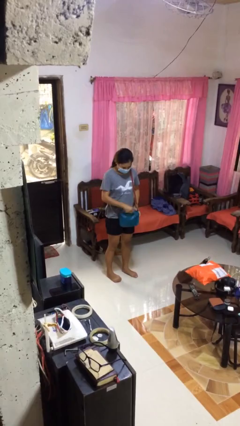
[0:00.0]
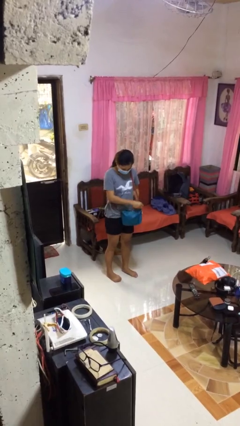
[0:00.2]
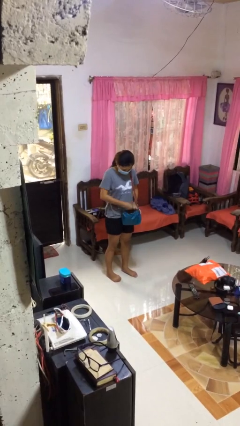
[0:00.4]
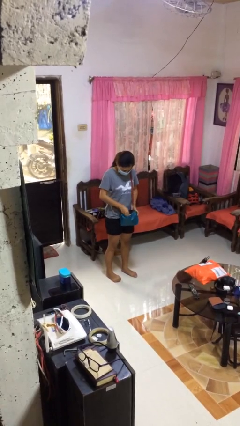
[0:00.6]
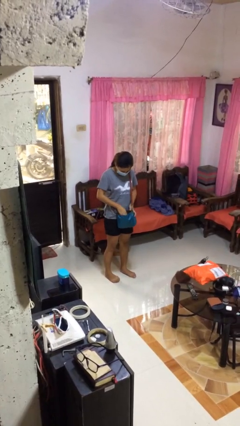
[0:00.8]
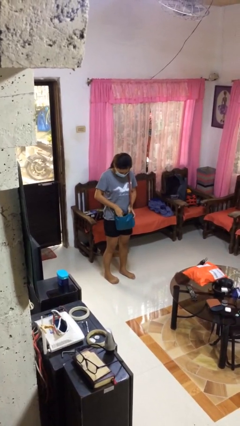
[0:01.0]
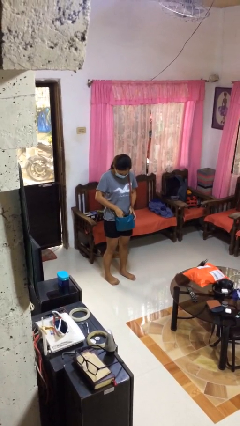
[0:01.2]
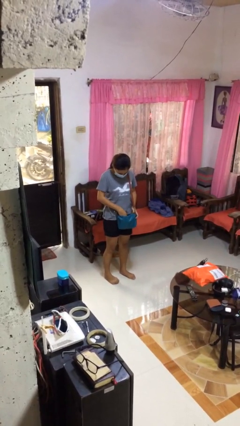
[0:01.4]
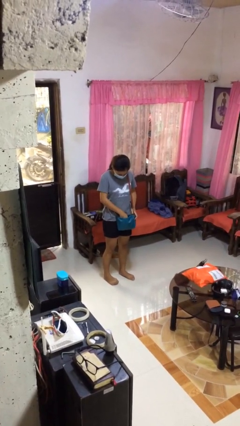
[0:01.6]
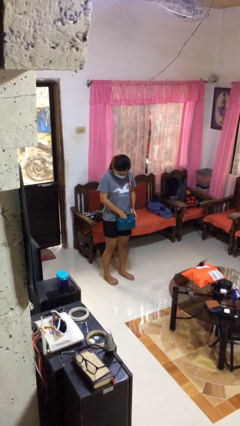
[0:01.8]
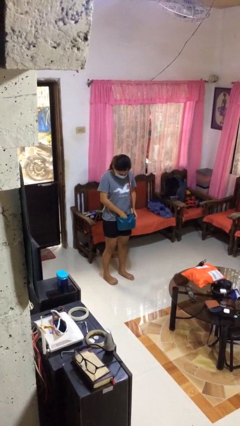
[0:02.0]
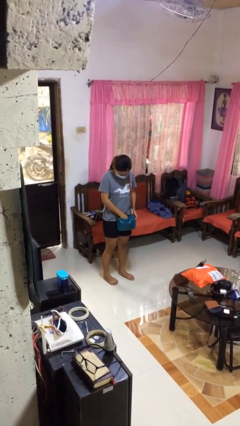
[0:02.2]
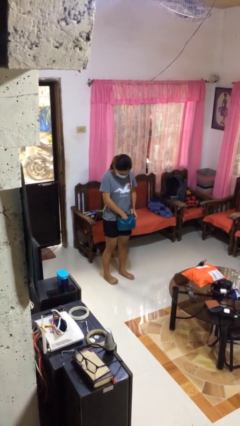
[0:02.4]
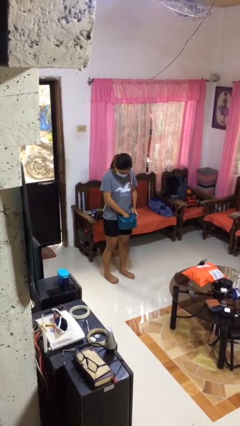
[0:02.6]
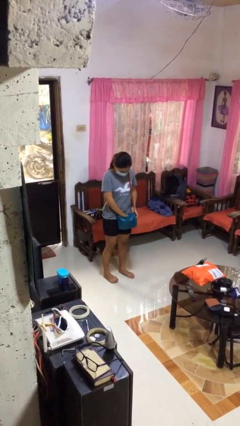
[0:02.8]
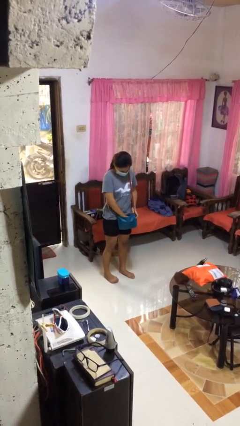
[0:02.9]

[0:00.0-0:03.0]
person searches in purse

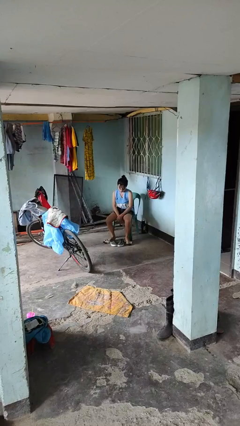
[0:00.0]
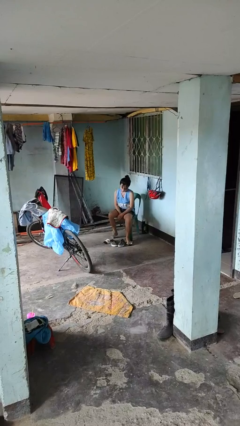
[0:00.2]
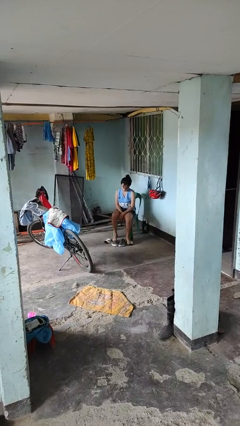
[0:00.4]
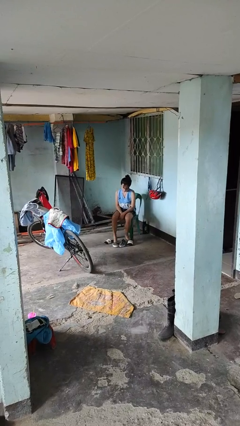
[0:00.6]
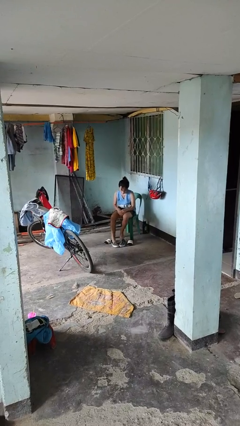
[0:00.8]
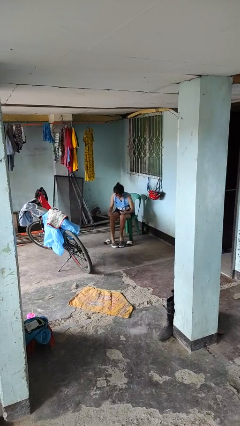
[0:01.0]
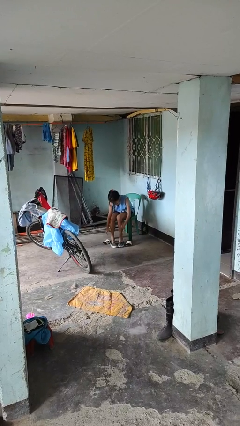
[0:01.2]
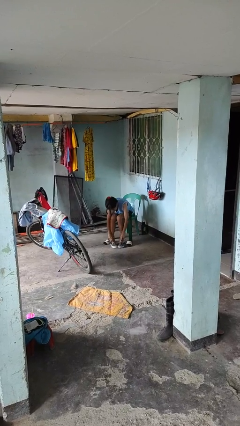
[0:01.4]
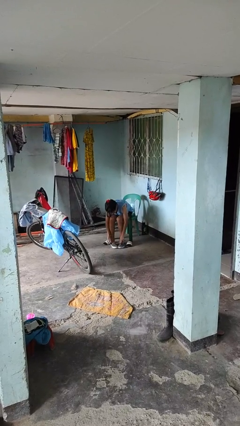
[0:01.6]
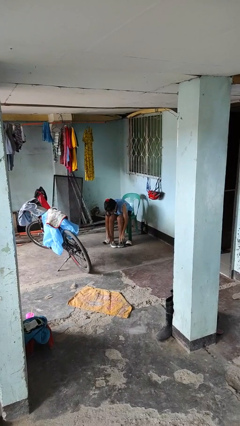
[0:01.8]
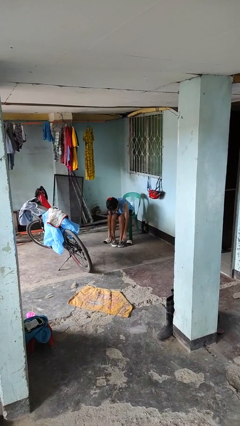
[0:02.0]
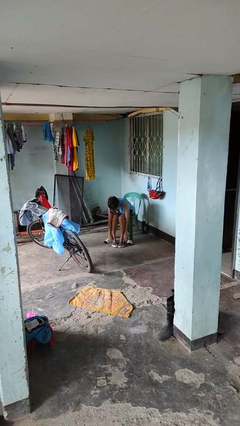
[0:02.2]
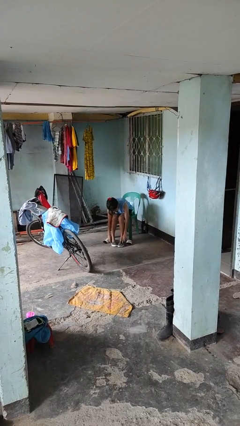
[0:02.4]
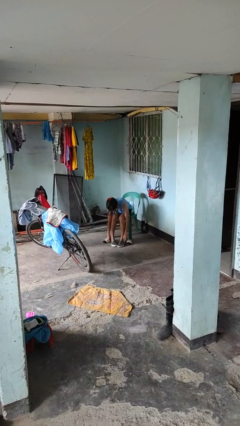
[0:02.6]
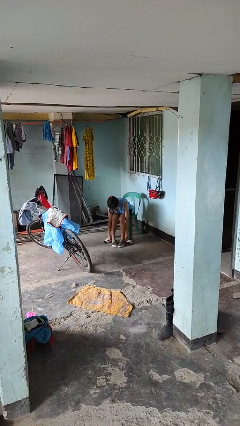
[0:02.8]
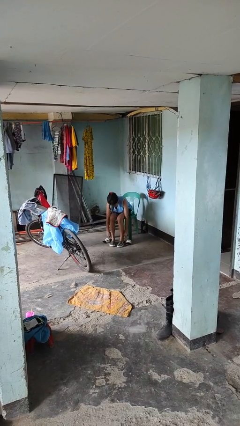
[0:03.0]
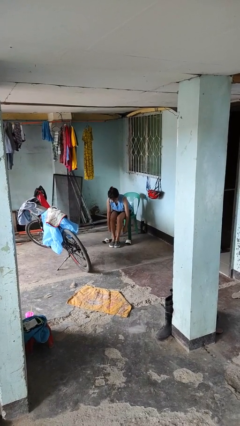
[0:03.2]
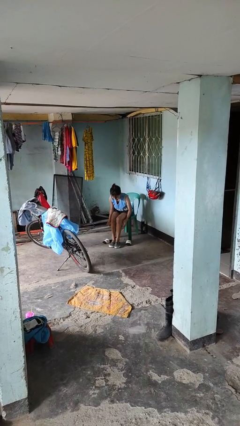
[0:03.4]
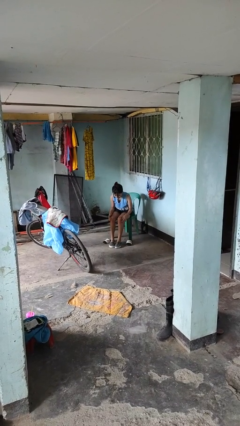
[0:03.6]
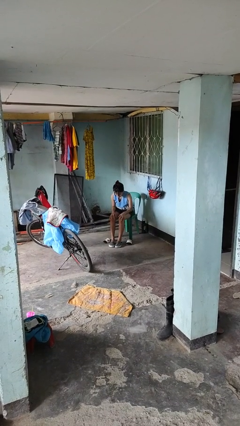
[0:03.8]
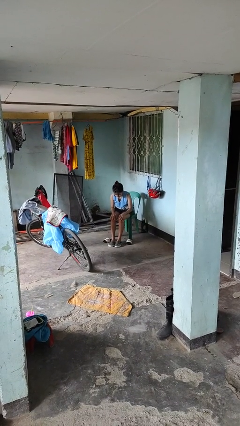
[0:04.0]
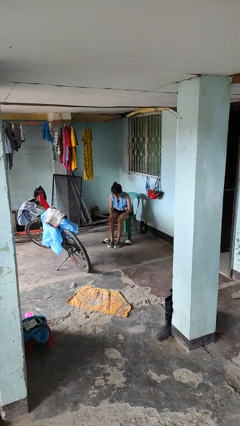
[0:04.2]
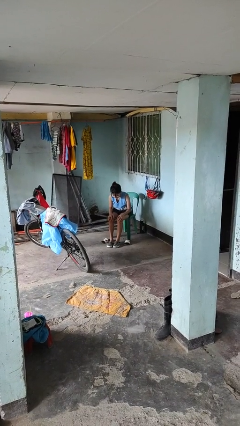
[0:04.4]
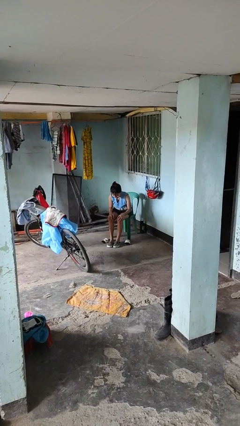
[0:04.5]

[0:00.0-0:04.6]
person puts on shoes

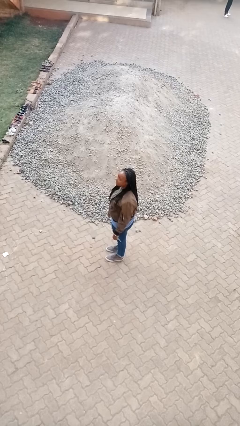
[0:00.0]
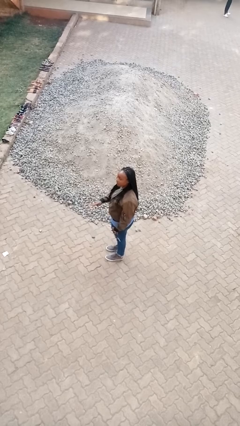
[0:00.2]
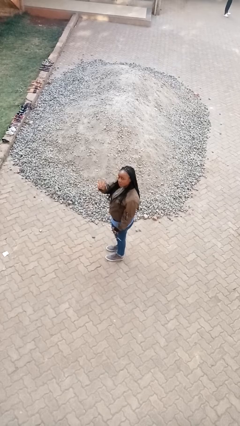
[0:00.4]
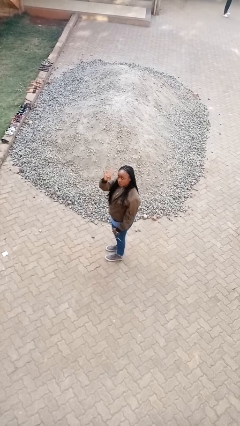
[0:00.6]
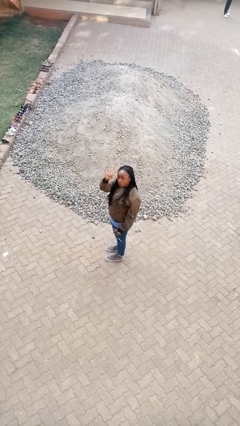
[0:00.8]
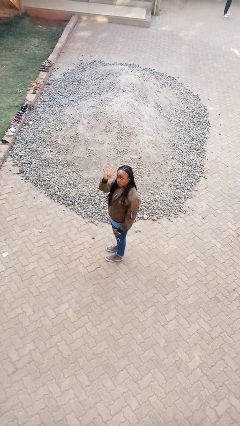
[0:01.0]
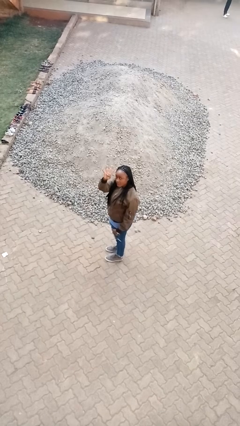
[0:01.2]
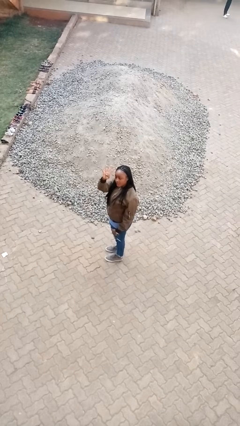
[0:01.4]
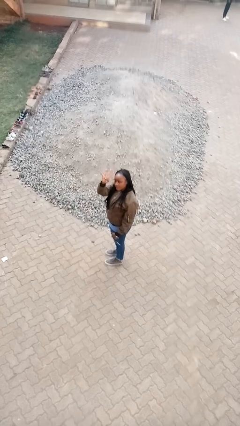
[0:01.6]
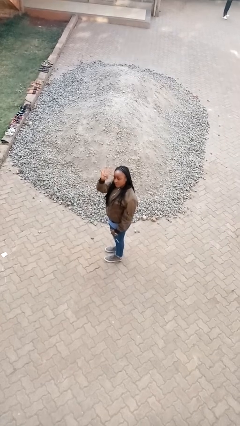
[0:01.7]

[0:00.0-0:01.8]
person gestures number four

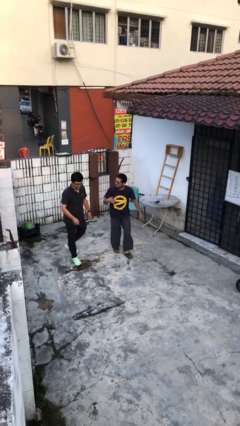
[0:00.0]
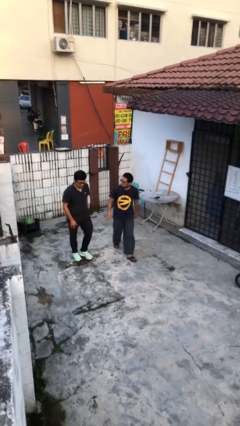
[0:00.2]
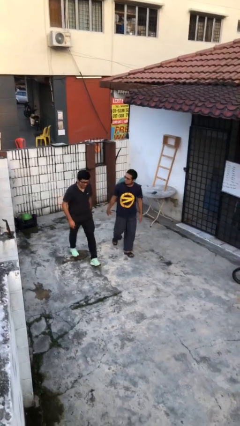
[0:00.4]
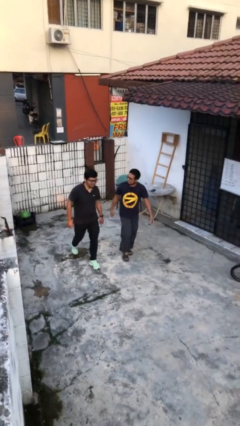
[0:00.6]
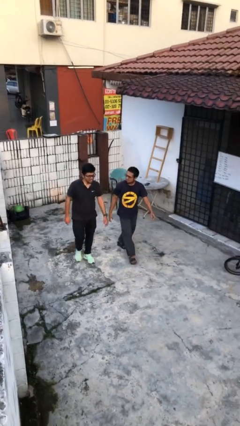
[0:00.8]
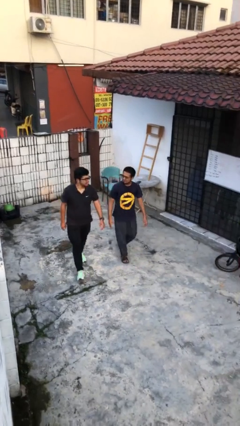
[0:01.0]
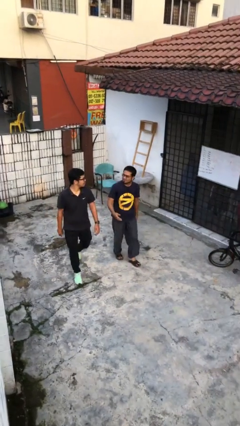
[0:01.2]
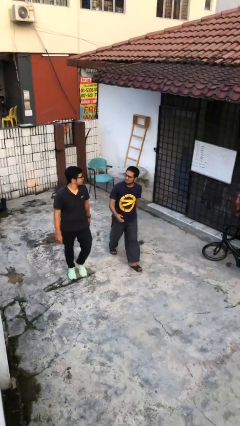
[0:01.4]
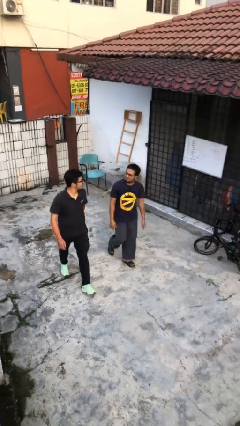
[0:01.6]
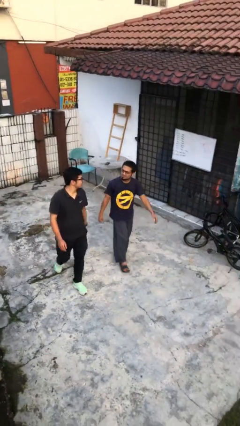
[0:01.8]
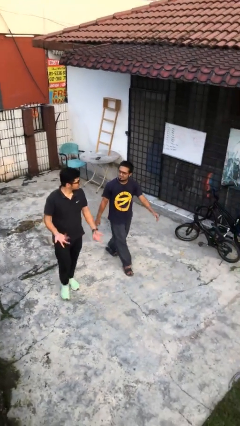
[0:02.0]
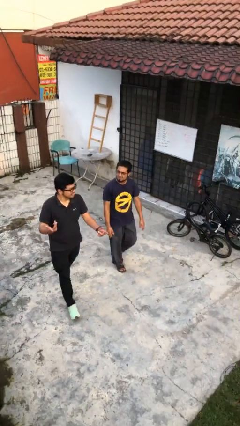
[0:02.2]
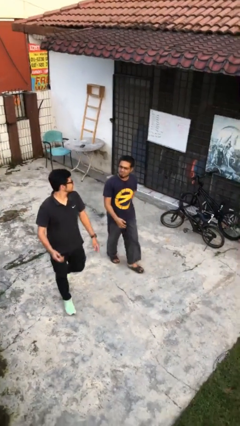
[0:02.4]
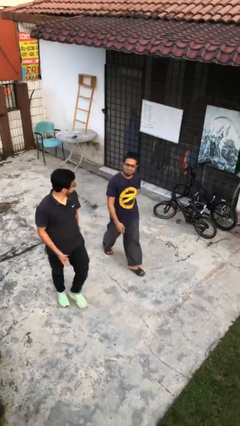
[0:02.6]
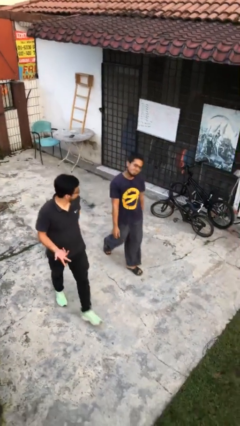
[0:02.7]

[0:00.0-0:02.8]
person talks to person

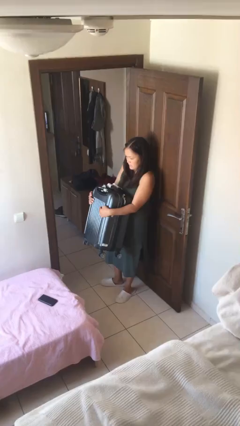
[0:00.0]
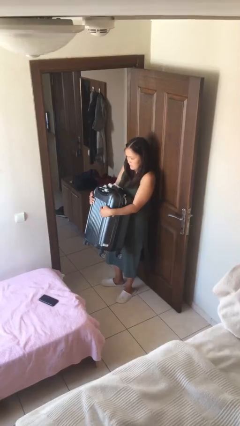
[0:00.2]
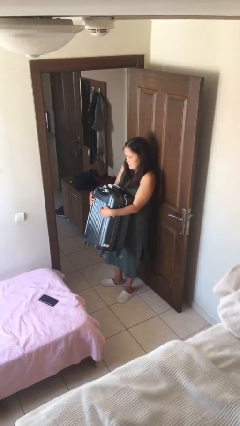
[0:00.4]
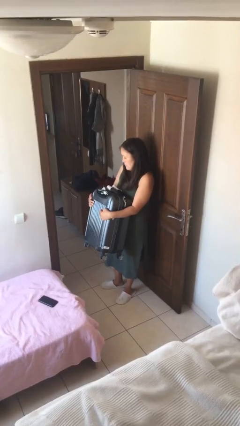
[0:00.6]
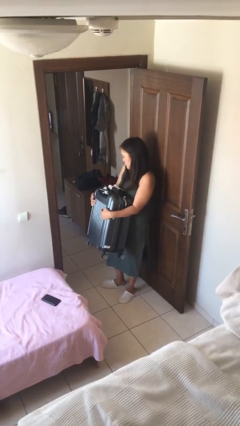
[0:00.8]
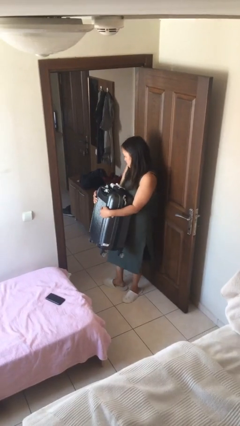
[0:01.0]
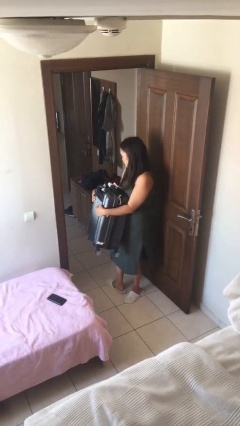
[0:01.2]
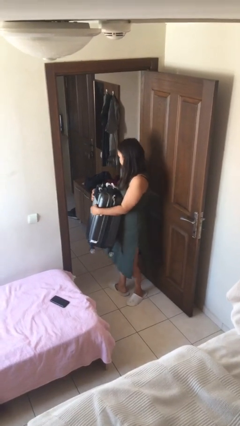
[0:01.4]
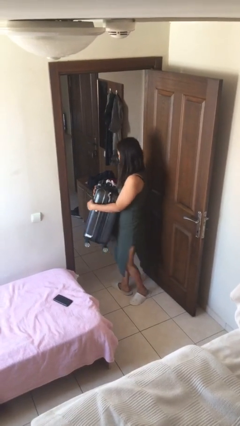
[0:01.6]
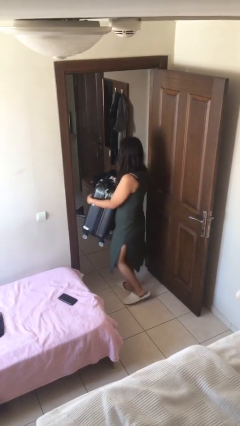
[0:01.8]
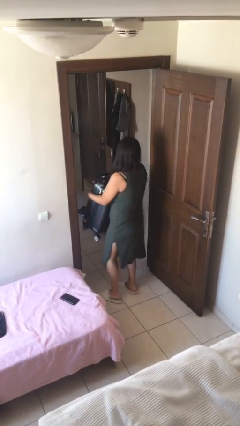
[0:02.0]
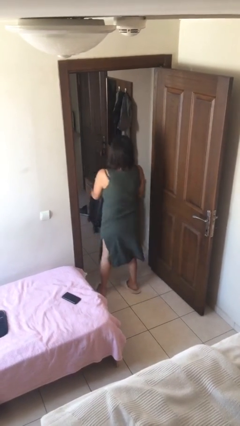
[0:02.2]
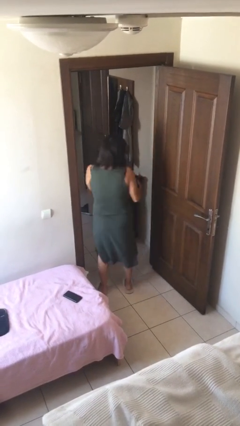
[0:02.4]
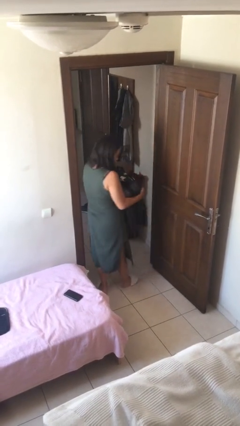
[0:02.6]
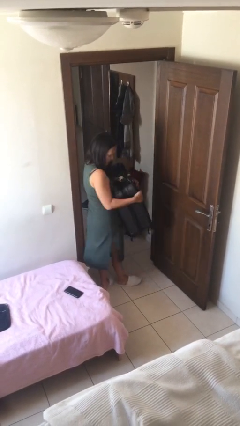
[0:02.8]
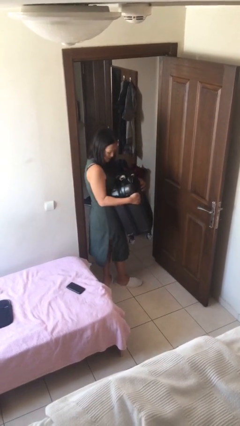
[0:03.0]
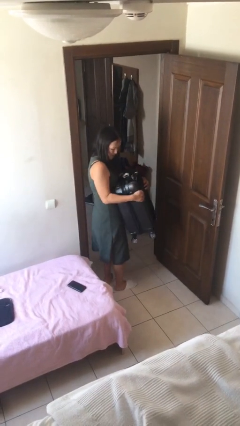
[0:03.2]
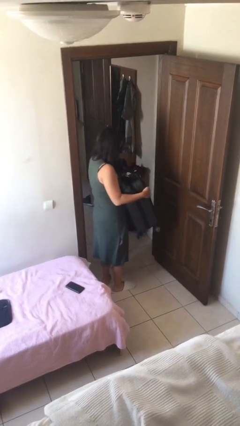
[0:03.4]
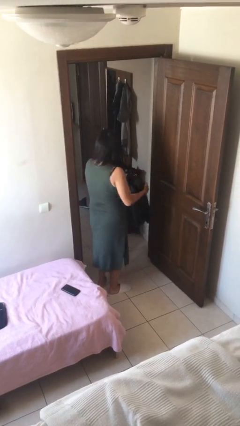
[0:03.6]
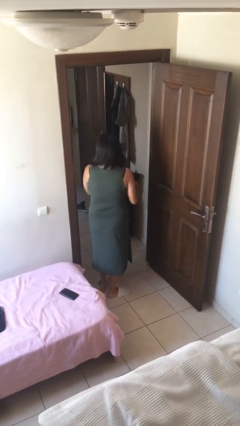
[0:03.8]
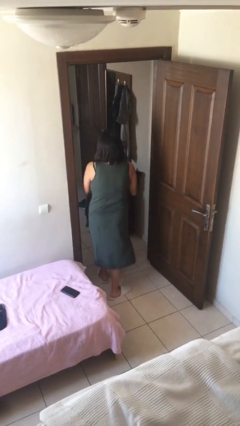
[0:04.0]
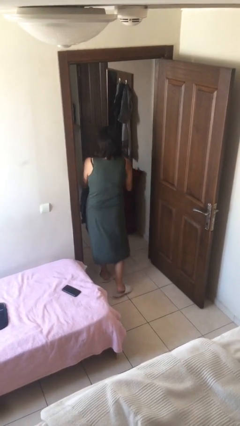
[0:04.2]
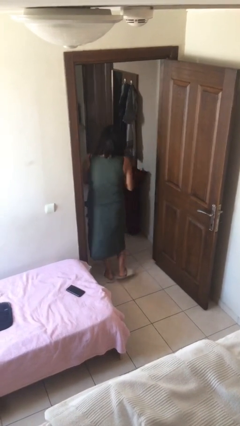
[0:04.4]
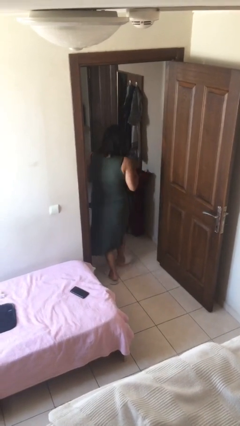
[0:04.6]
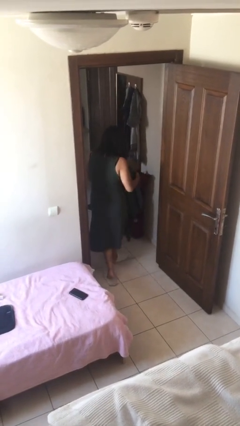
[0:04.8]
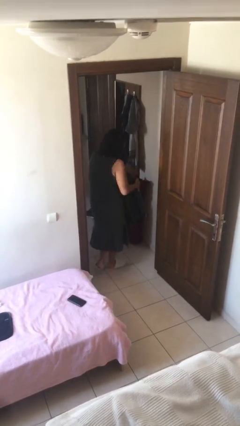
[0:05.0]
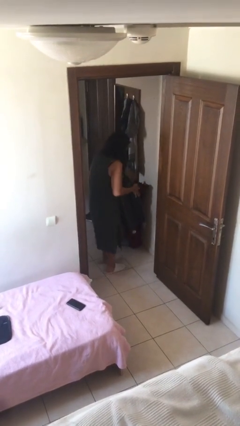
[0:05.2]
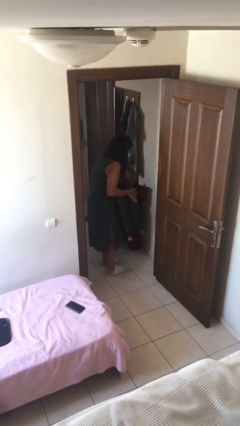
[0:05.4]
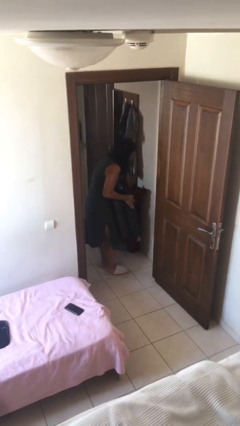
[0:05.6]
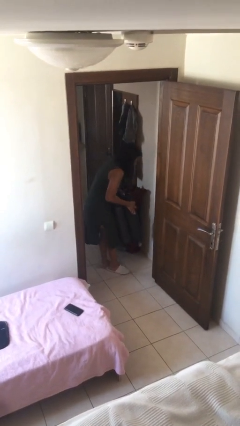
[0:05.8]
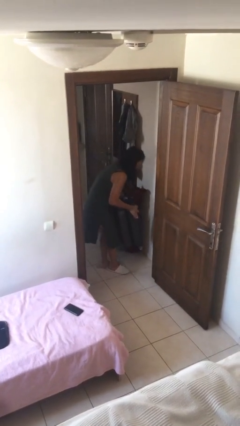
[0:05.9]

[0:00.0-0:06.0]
person carries heavy object
